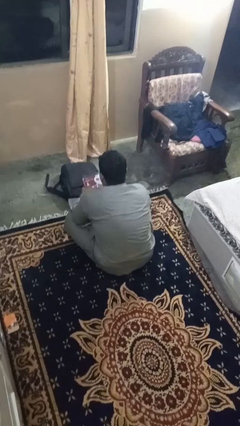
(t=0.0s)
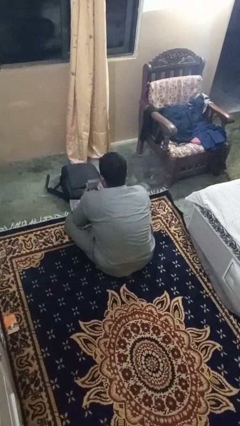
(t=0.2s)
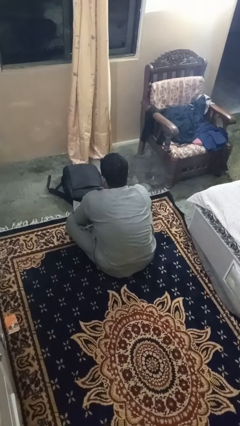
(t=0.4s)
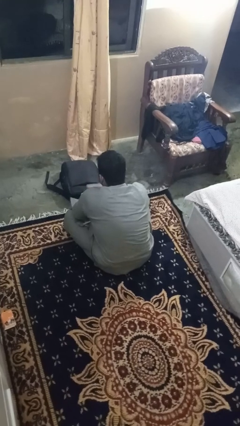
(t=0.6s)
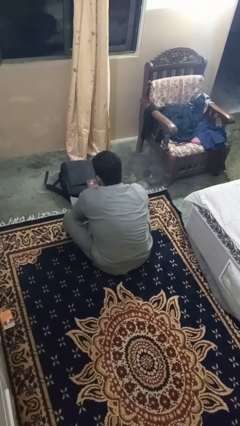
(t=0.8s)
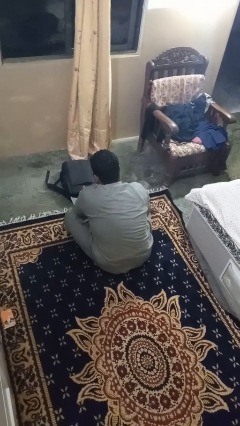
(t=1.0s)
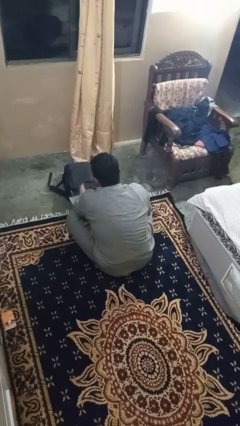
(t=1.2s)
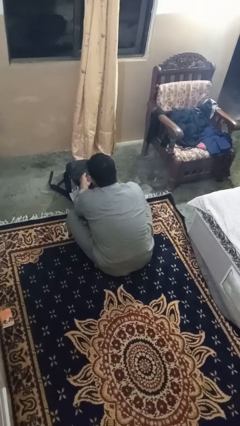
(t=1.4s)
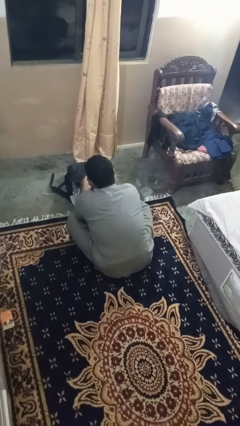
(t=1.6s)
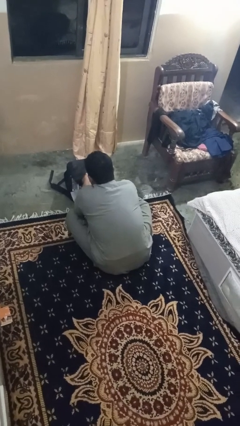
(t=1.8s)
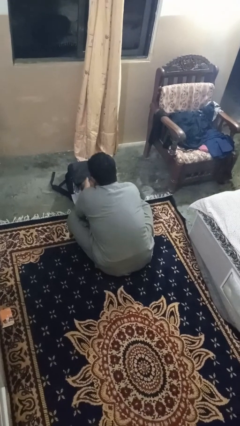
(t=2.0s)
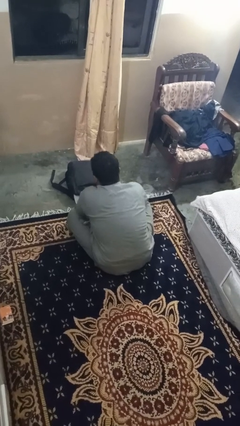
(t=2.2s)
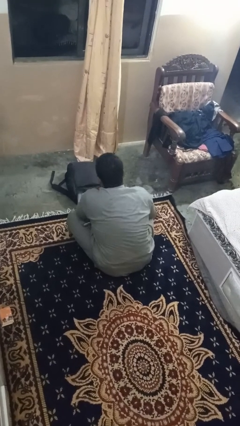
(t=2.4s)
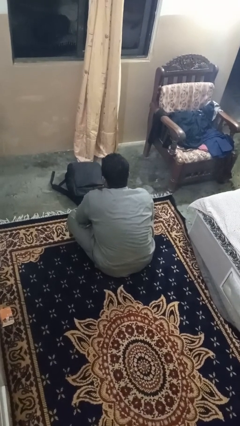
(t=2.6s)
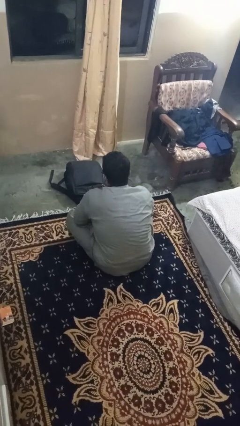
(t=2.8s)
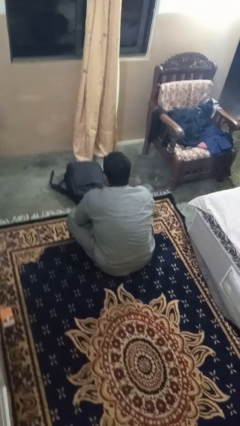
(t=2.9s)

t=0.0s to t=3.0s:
person puts object into bag

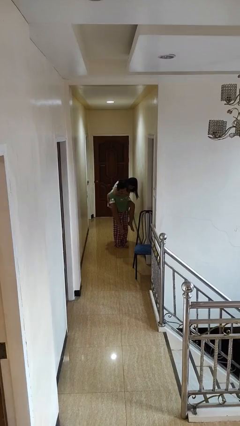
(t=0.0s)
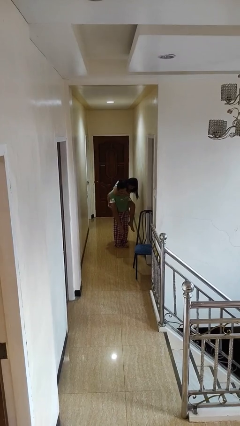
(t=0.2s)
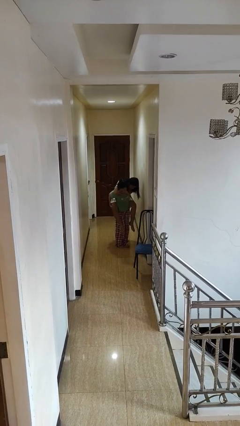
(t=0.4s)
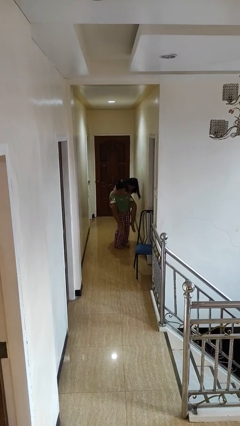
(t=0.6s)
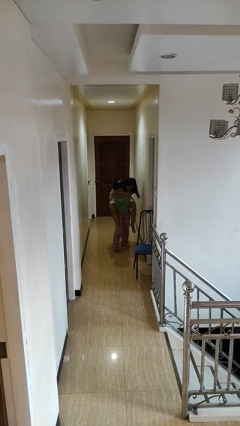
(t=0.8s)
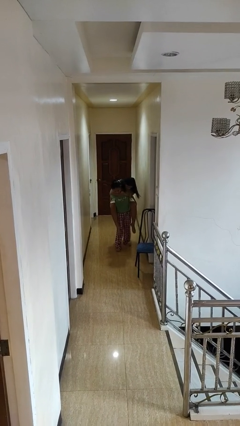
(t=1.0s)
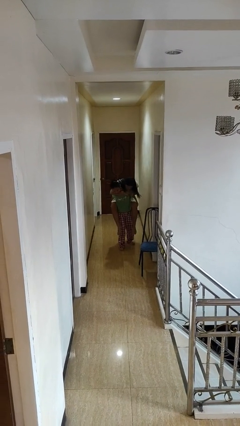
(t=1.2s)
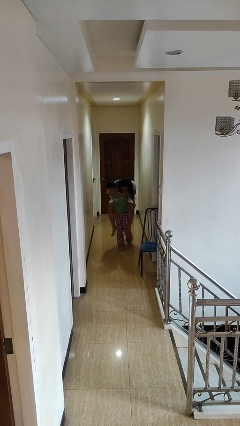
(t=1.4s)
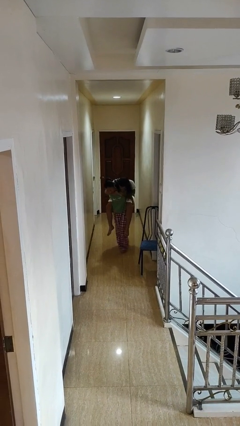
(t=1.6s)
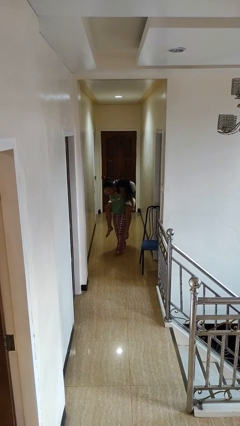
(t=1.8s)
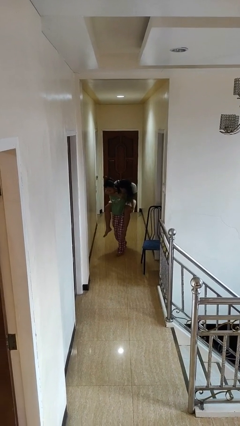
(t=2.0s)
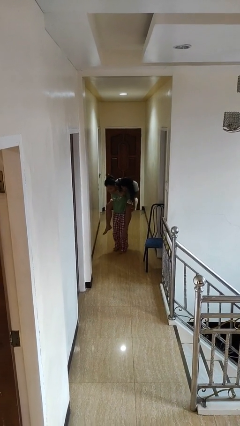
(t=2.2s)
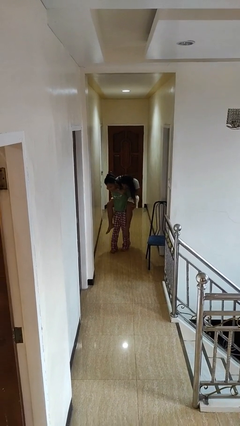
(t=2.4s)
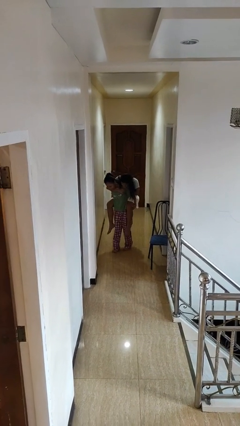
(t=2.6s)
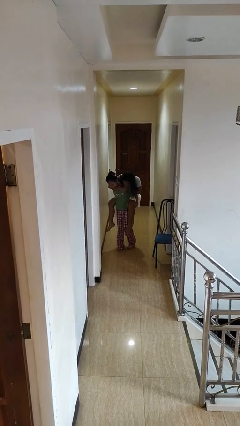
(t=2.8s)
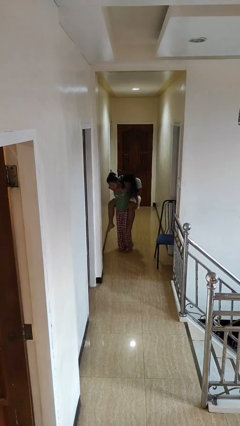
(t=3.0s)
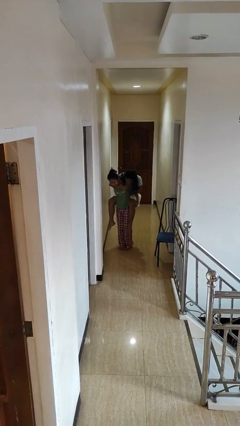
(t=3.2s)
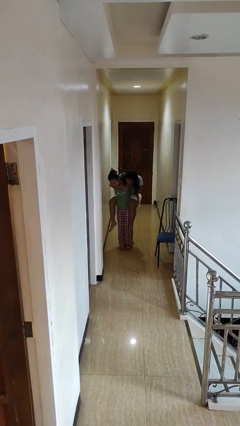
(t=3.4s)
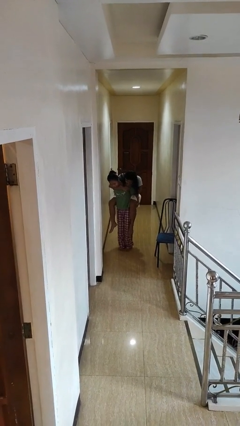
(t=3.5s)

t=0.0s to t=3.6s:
person carries person on back

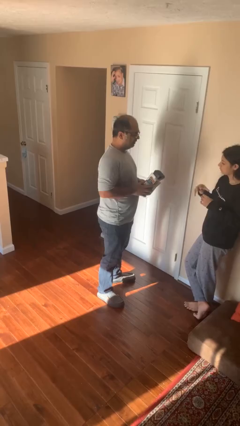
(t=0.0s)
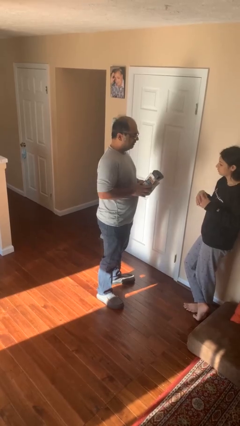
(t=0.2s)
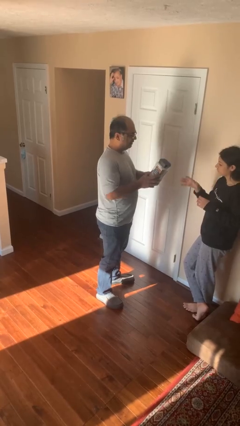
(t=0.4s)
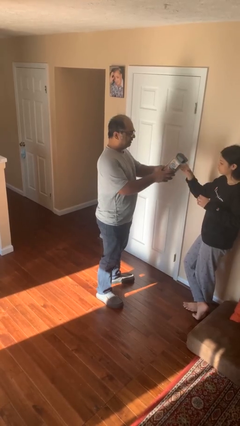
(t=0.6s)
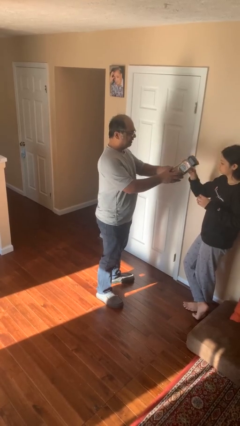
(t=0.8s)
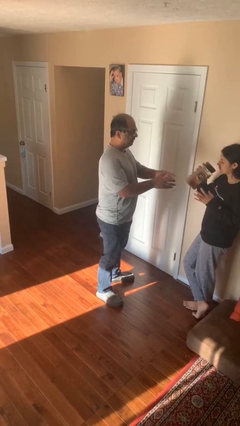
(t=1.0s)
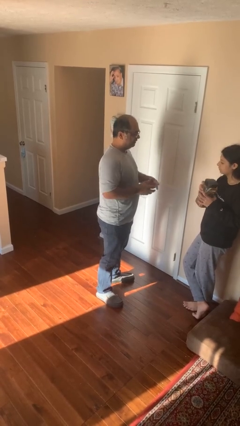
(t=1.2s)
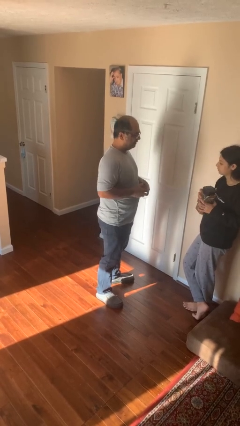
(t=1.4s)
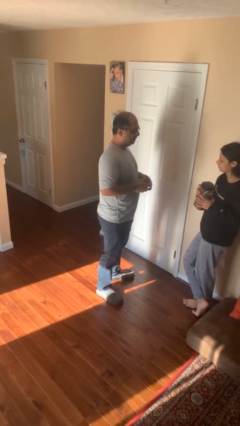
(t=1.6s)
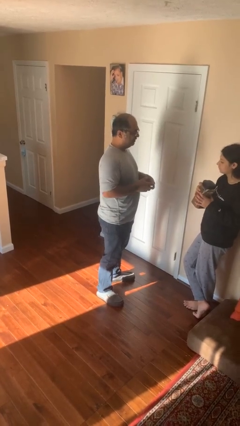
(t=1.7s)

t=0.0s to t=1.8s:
person transfers object to person

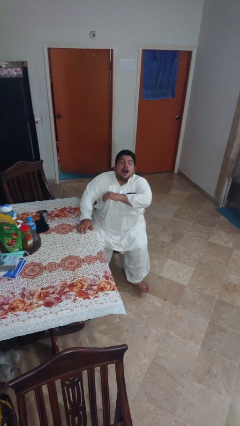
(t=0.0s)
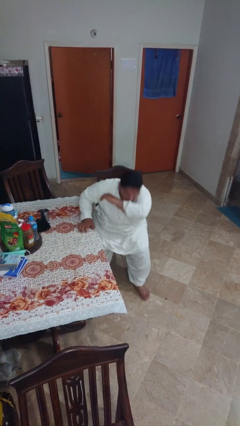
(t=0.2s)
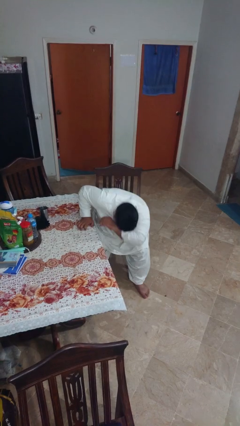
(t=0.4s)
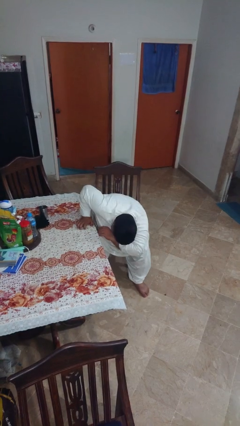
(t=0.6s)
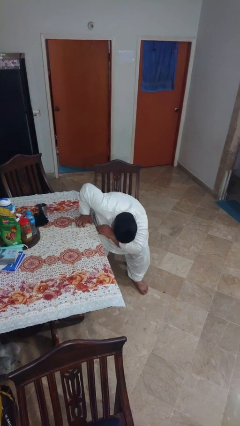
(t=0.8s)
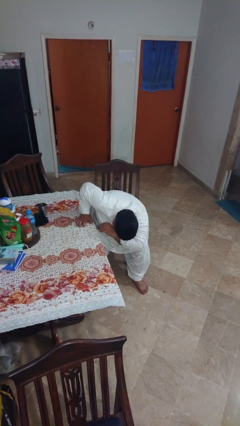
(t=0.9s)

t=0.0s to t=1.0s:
person sneezes into arm

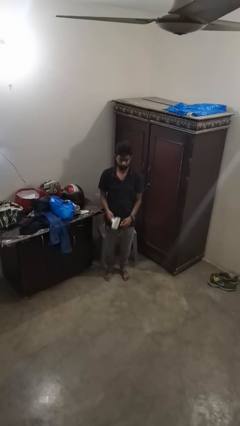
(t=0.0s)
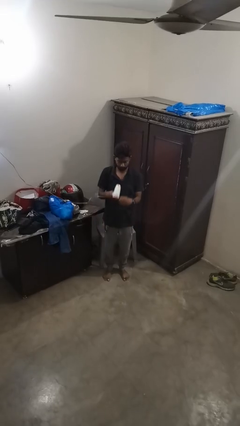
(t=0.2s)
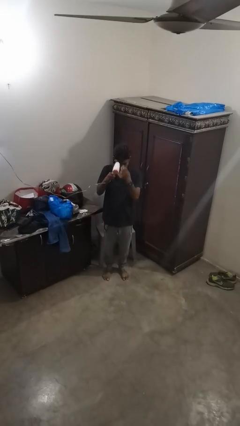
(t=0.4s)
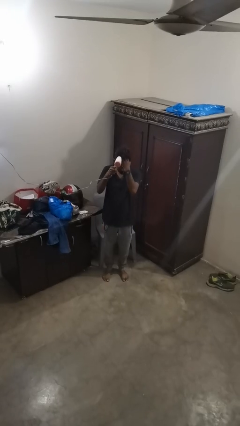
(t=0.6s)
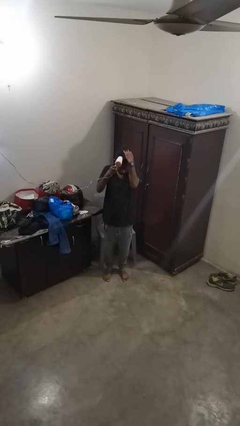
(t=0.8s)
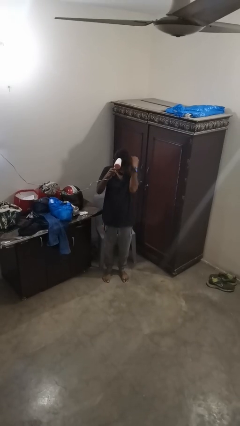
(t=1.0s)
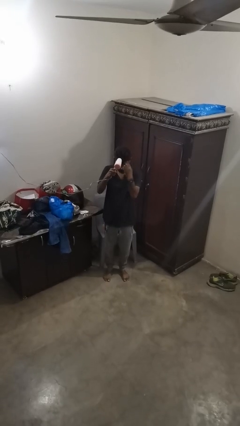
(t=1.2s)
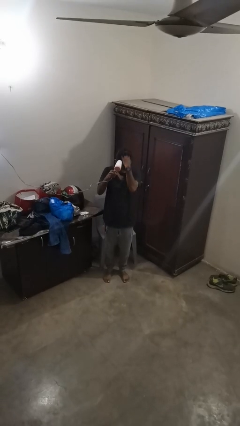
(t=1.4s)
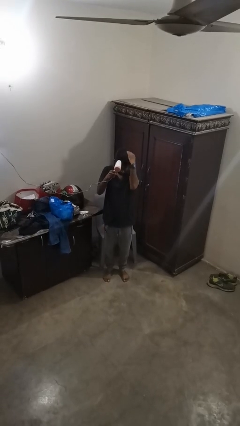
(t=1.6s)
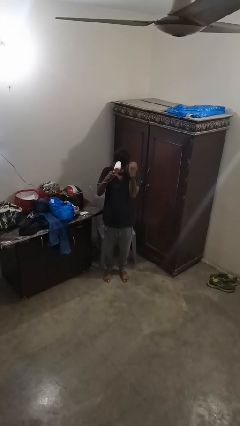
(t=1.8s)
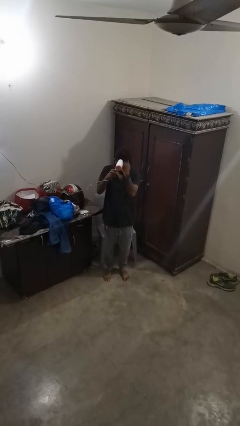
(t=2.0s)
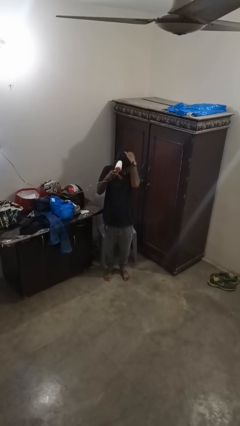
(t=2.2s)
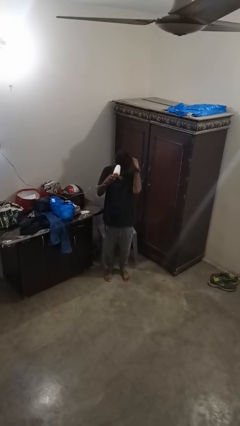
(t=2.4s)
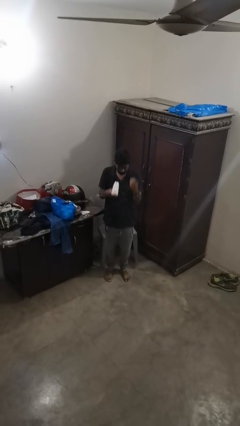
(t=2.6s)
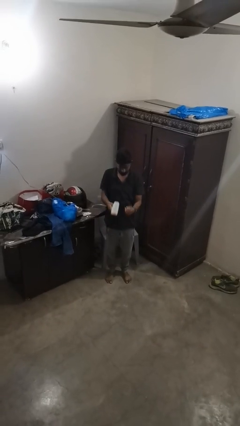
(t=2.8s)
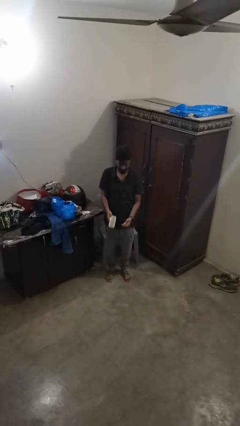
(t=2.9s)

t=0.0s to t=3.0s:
person dries hair with hairdryer

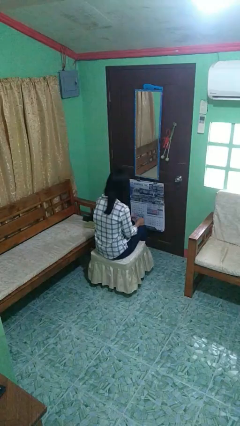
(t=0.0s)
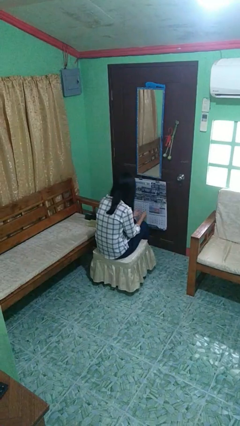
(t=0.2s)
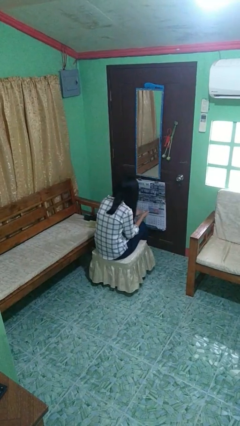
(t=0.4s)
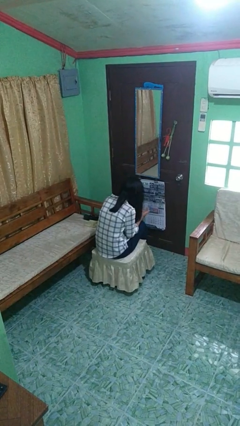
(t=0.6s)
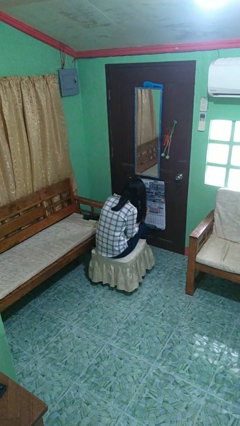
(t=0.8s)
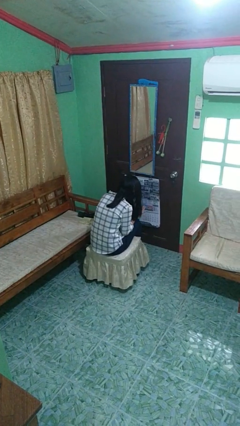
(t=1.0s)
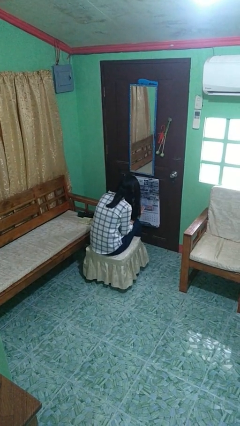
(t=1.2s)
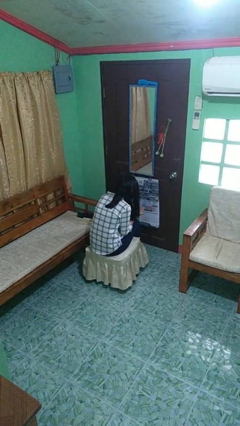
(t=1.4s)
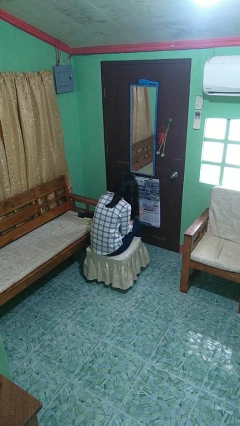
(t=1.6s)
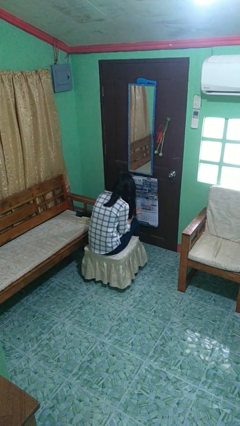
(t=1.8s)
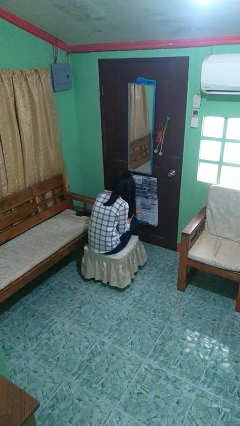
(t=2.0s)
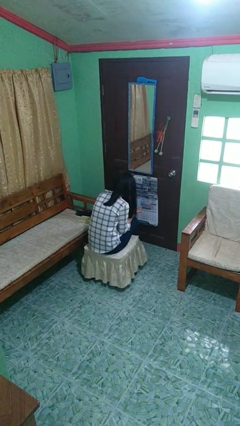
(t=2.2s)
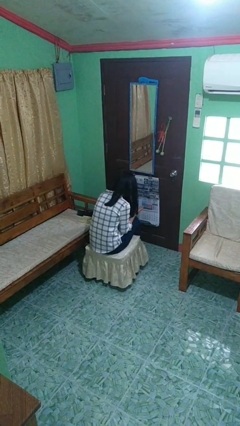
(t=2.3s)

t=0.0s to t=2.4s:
person looks at hands in lap

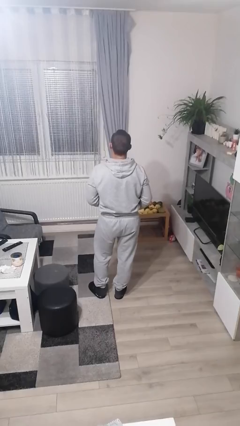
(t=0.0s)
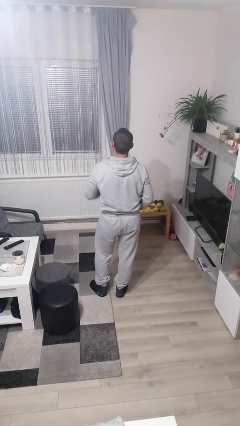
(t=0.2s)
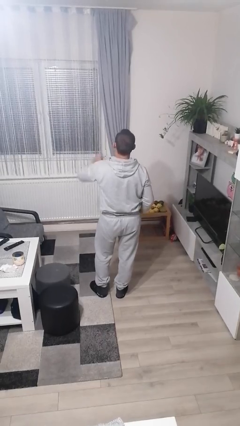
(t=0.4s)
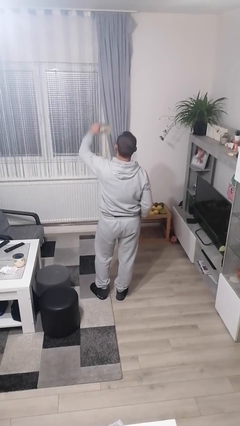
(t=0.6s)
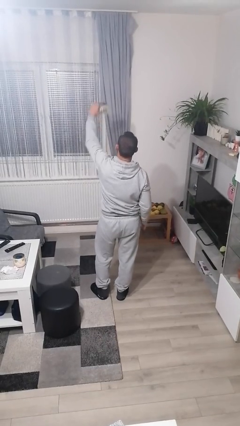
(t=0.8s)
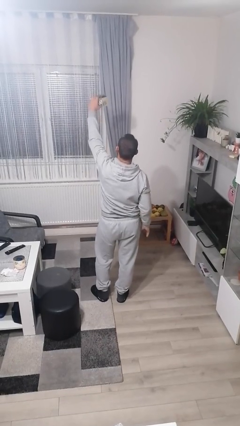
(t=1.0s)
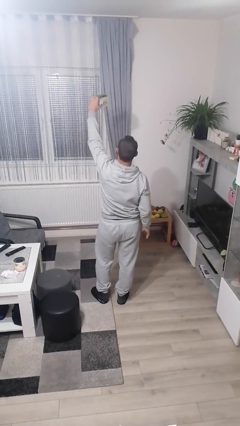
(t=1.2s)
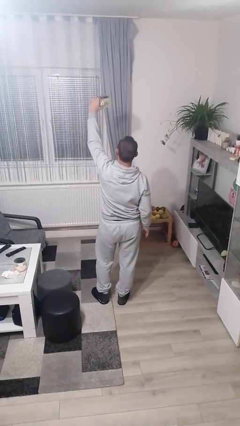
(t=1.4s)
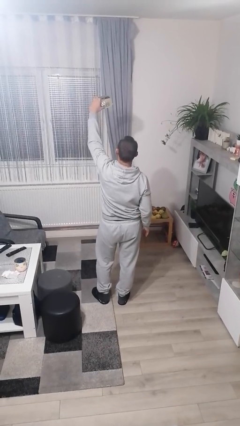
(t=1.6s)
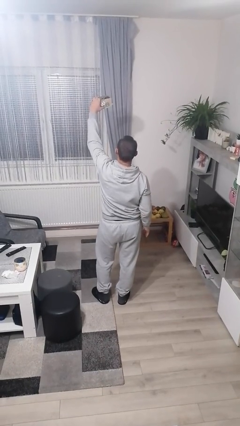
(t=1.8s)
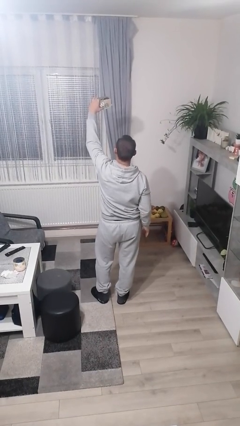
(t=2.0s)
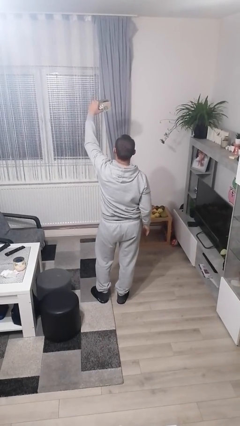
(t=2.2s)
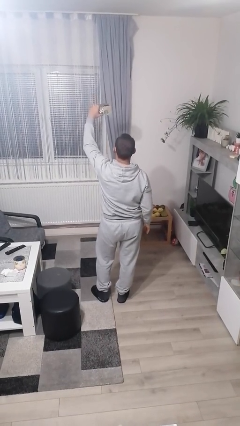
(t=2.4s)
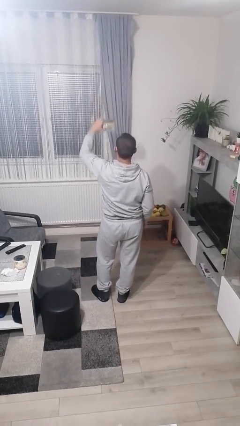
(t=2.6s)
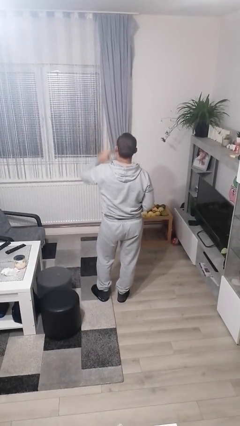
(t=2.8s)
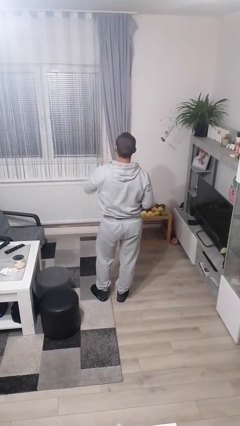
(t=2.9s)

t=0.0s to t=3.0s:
person holds object above head
